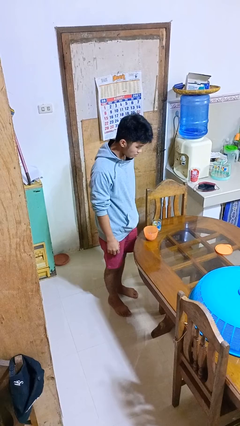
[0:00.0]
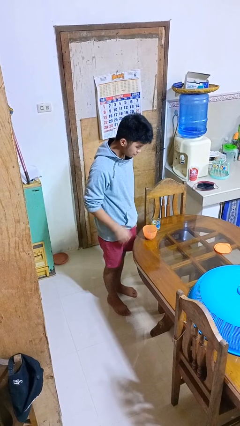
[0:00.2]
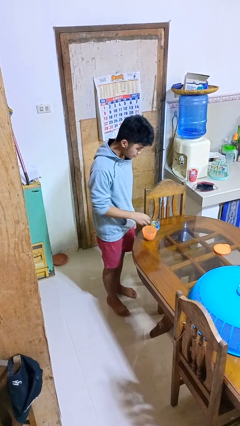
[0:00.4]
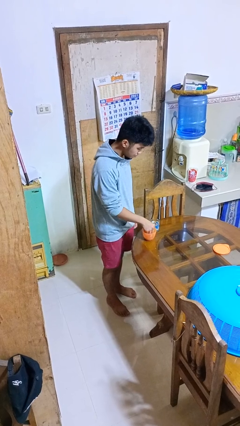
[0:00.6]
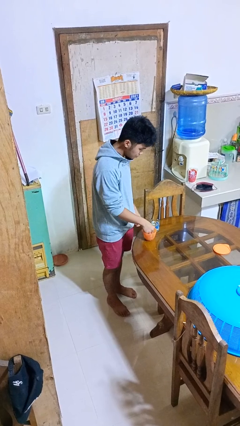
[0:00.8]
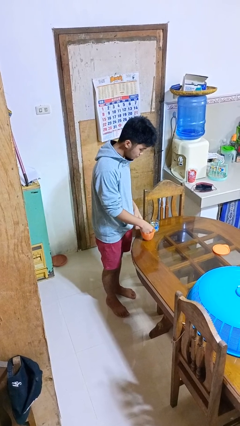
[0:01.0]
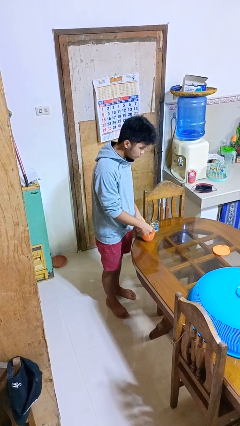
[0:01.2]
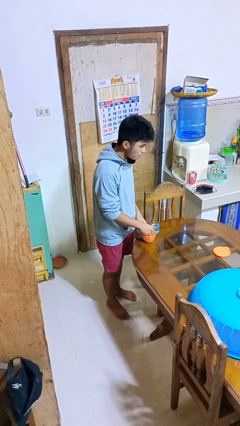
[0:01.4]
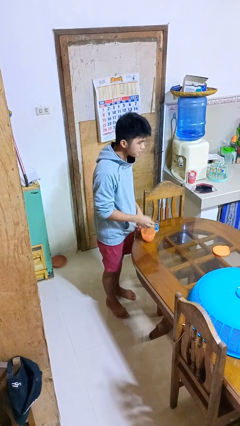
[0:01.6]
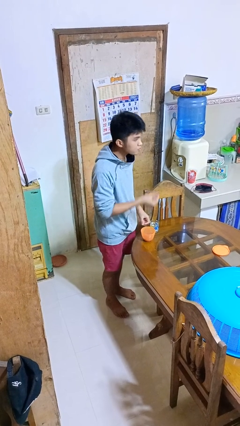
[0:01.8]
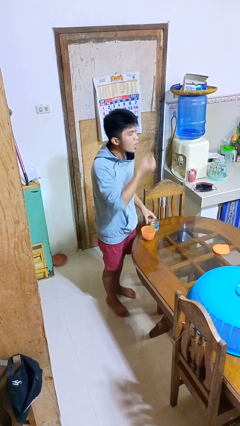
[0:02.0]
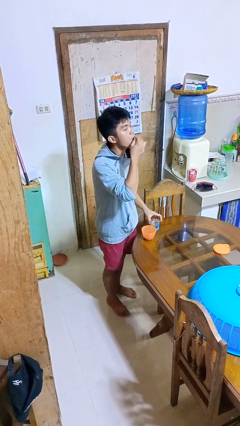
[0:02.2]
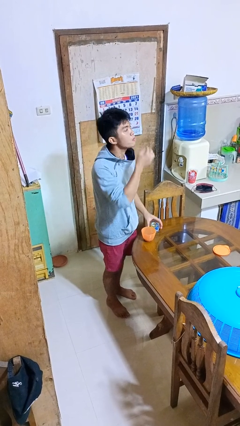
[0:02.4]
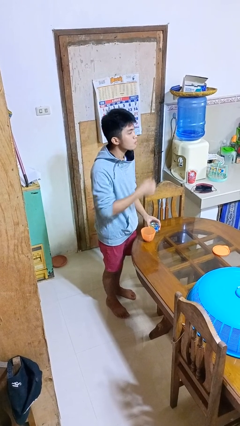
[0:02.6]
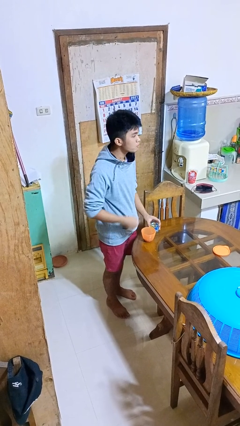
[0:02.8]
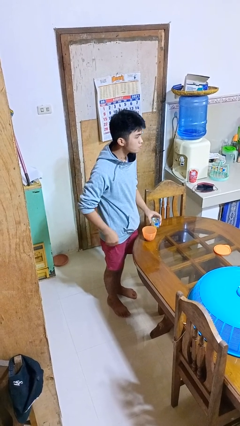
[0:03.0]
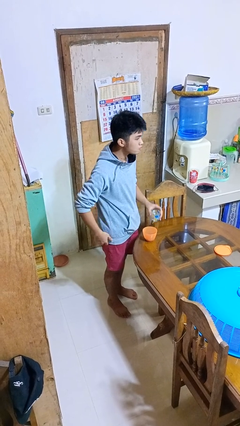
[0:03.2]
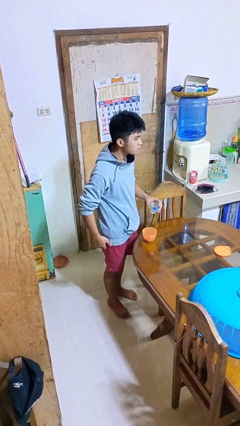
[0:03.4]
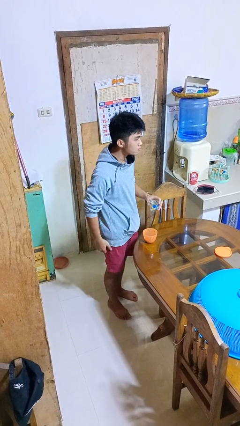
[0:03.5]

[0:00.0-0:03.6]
person takes medicine pills

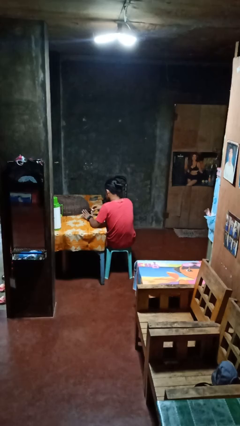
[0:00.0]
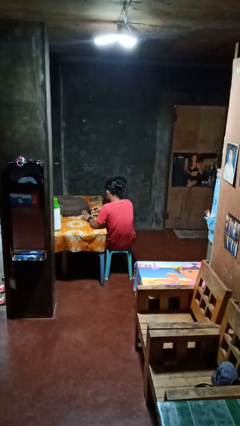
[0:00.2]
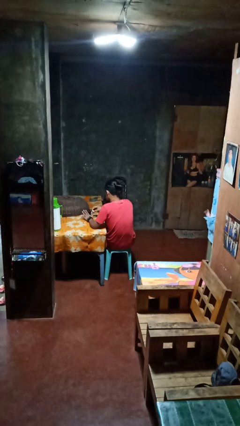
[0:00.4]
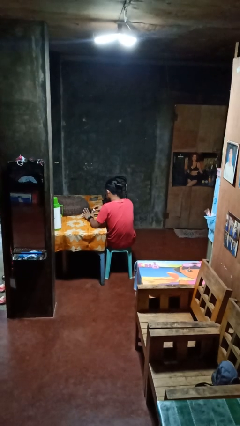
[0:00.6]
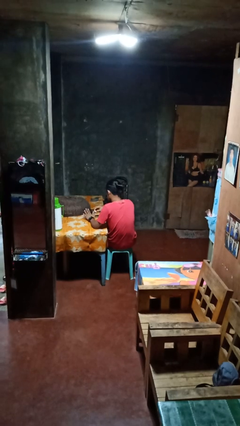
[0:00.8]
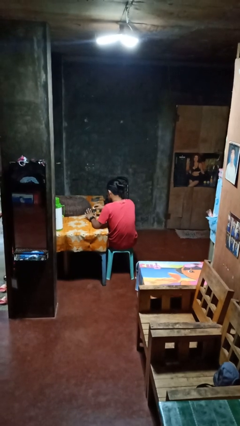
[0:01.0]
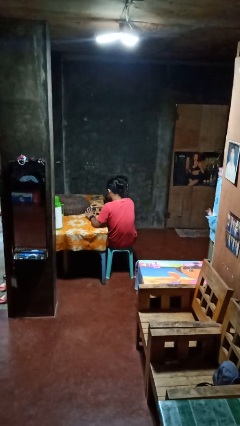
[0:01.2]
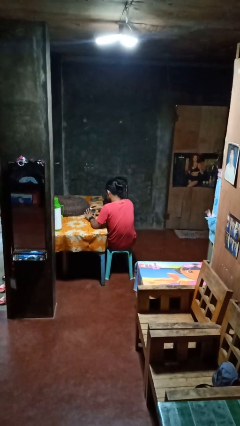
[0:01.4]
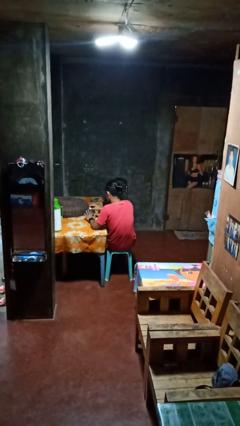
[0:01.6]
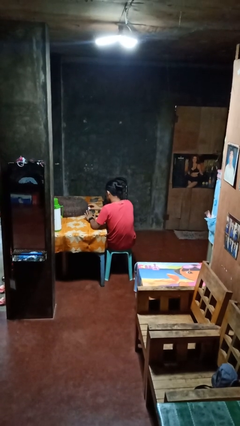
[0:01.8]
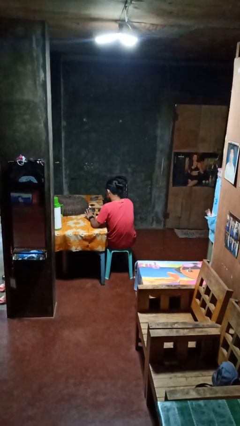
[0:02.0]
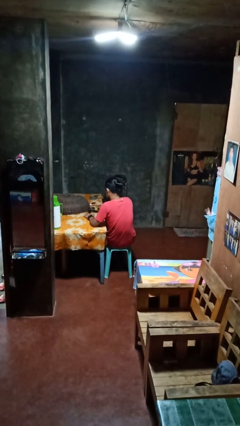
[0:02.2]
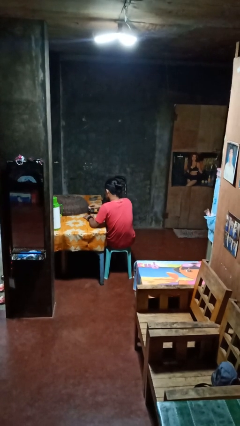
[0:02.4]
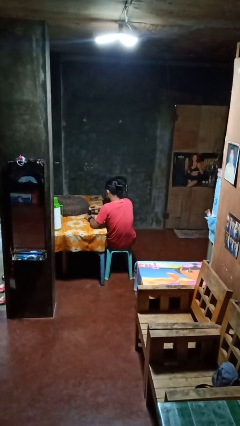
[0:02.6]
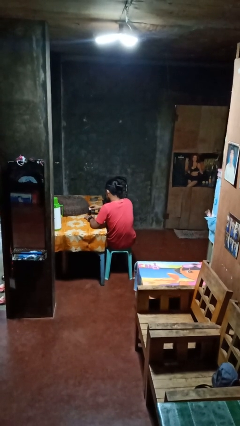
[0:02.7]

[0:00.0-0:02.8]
person paints fingernails

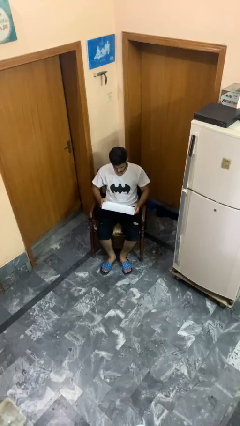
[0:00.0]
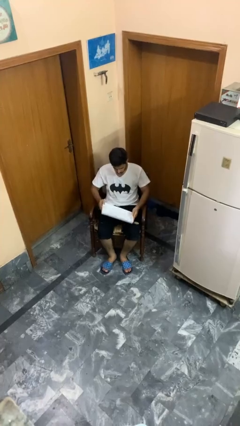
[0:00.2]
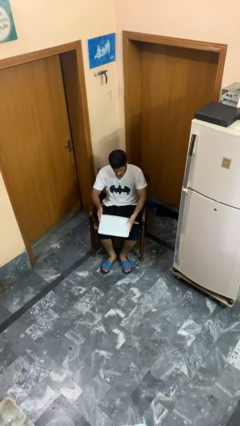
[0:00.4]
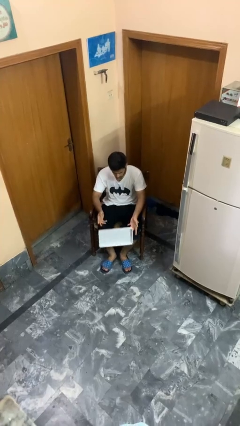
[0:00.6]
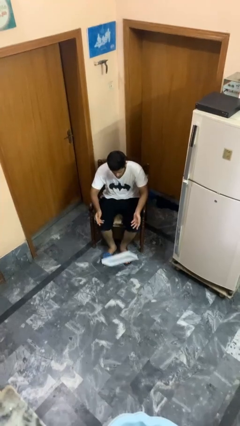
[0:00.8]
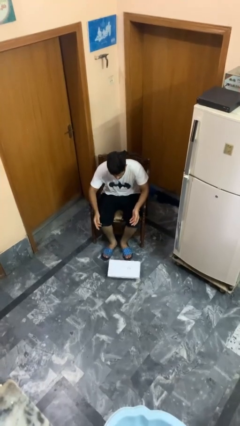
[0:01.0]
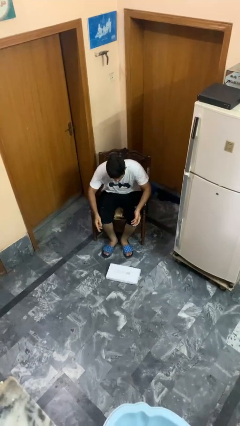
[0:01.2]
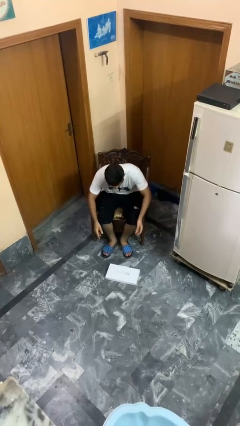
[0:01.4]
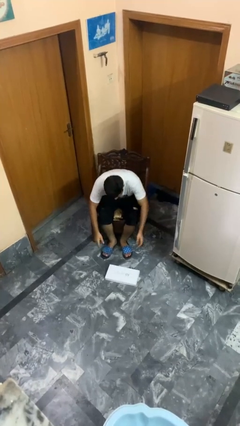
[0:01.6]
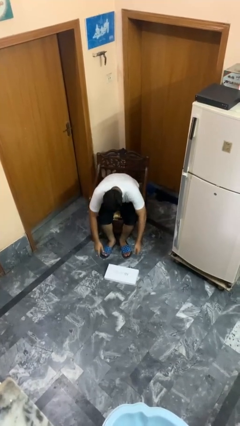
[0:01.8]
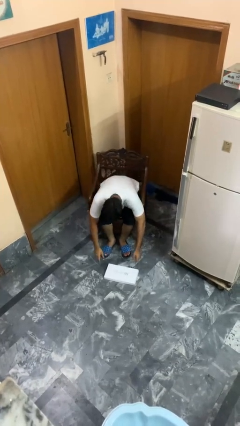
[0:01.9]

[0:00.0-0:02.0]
person drops object

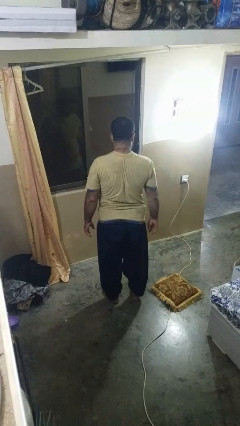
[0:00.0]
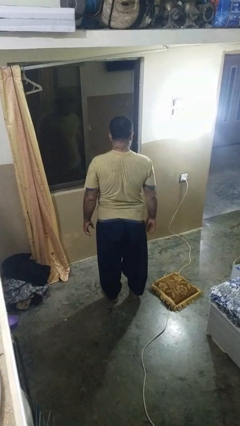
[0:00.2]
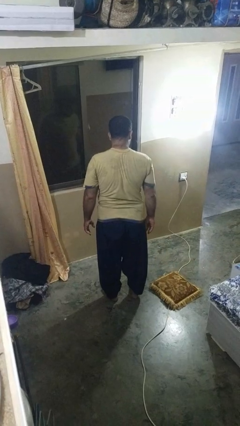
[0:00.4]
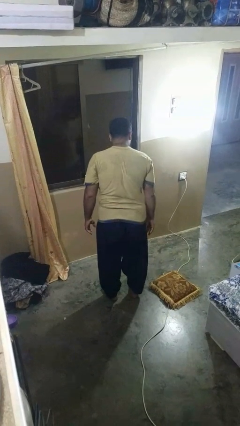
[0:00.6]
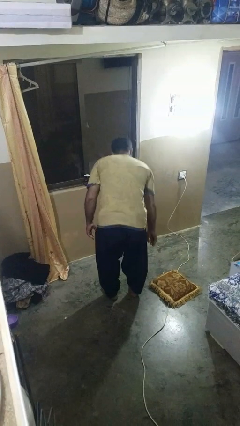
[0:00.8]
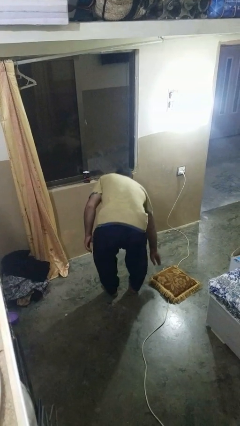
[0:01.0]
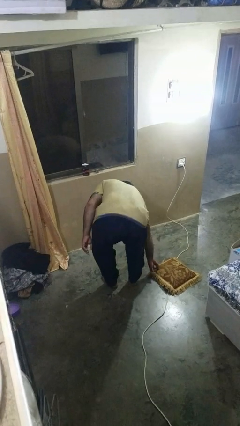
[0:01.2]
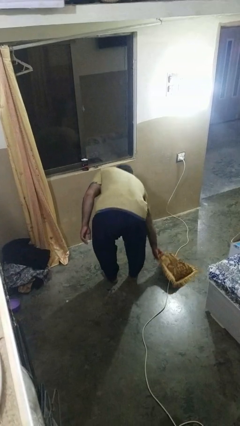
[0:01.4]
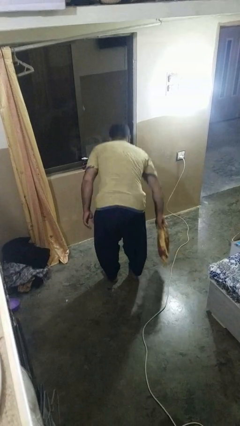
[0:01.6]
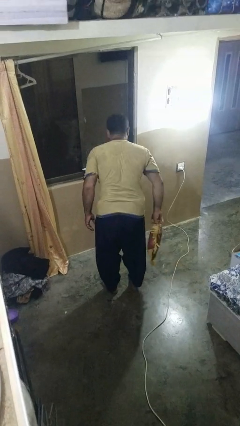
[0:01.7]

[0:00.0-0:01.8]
person picks up object from floor

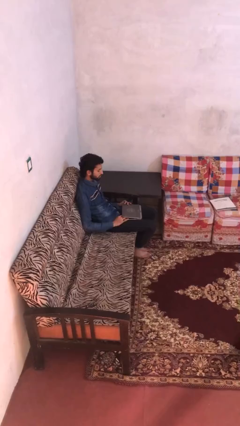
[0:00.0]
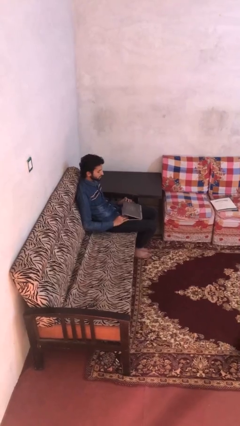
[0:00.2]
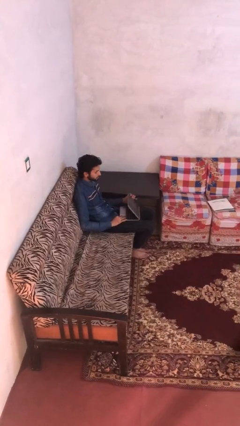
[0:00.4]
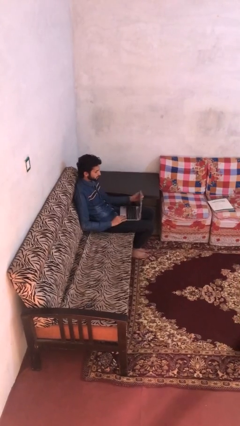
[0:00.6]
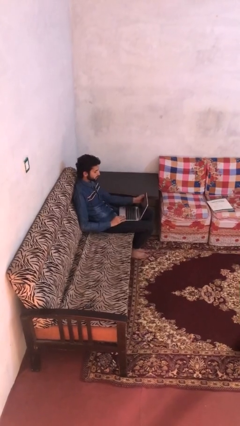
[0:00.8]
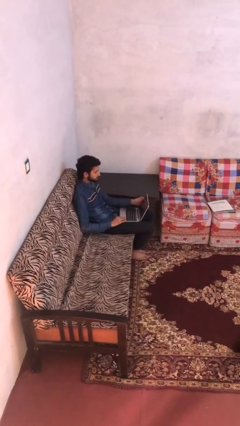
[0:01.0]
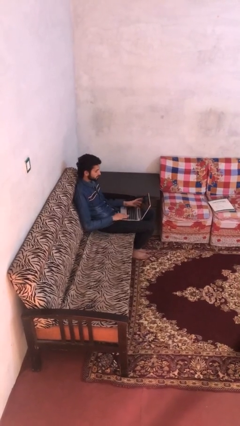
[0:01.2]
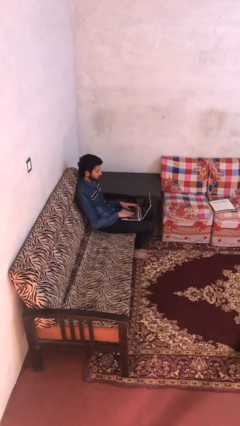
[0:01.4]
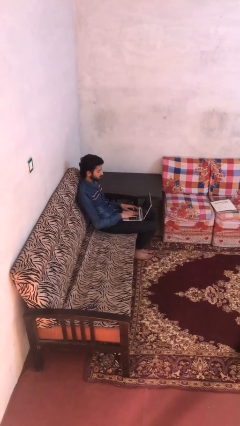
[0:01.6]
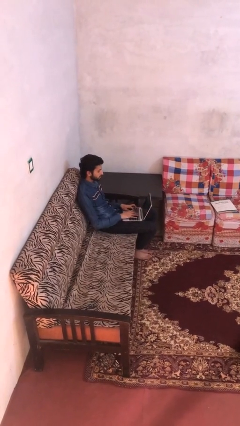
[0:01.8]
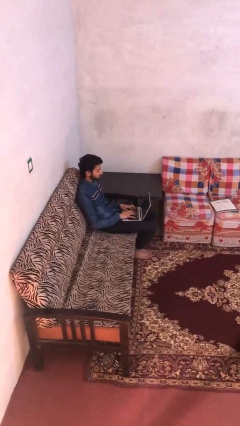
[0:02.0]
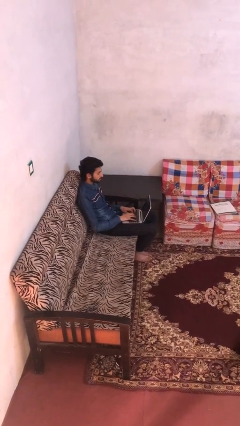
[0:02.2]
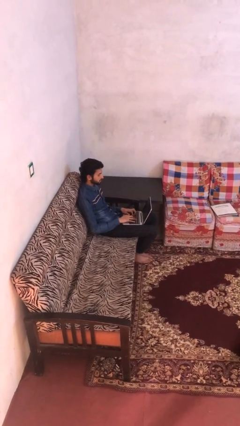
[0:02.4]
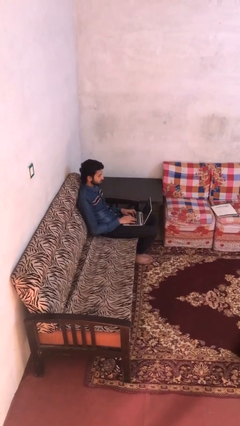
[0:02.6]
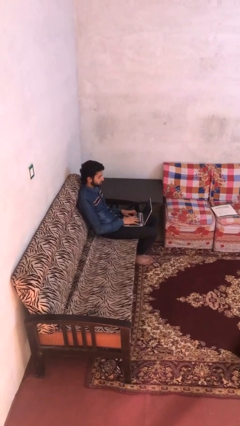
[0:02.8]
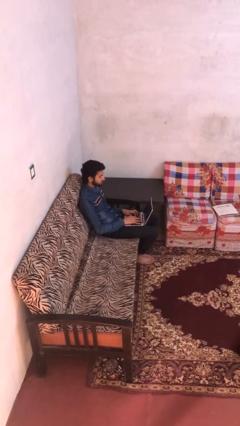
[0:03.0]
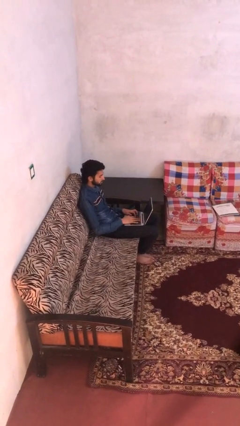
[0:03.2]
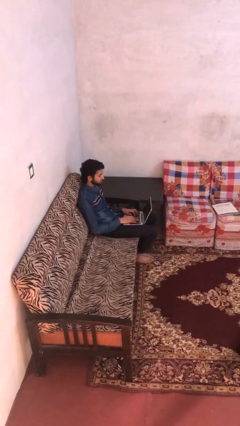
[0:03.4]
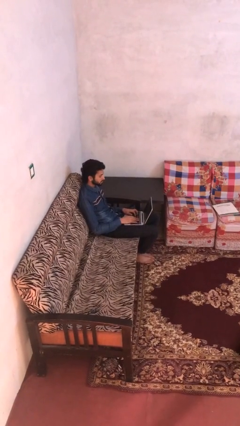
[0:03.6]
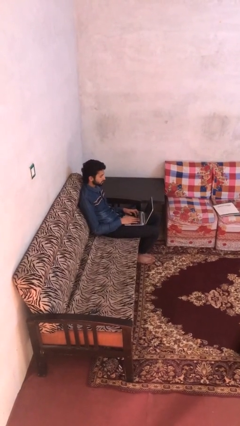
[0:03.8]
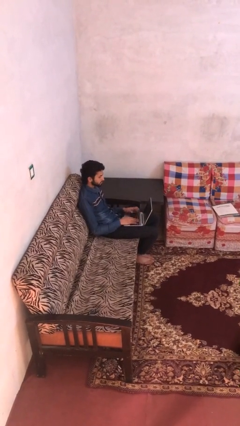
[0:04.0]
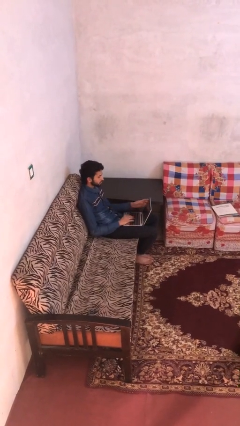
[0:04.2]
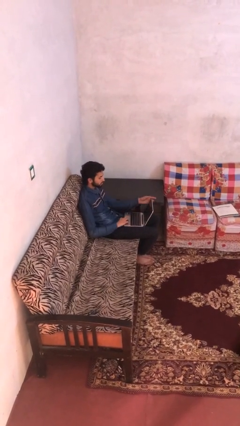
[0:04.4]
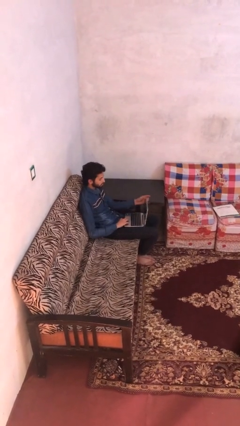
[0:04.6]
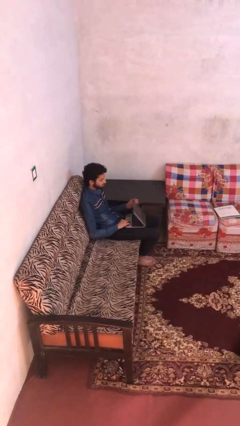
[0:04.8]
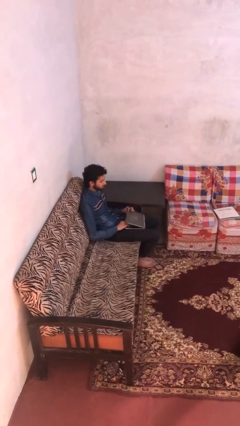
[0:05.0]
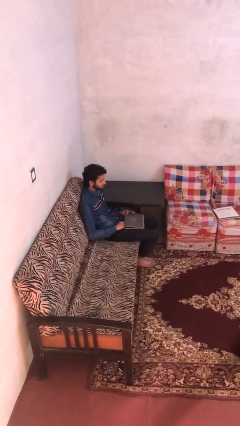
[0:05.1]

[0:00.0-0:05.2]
person interacts with laptop

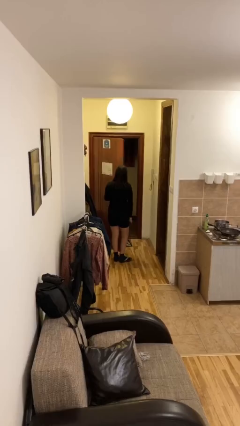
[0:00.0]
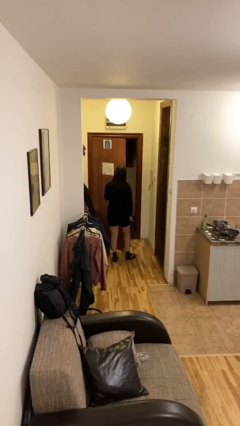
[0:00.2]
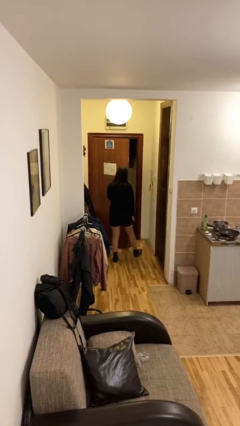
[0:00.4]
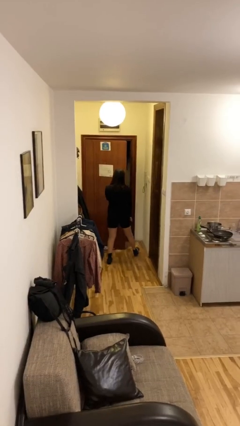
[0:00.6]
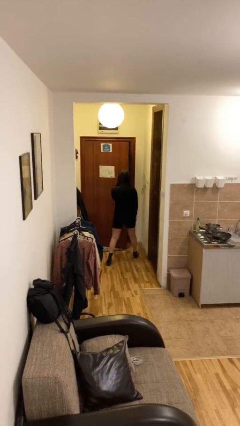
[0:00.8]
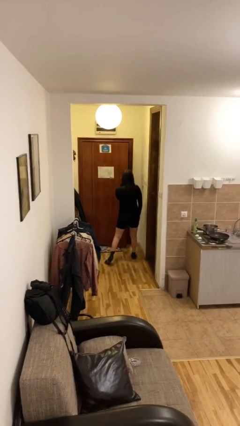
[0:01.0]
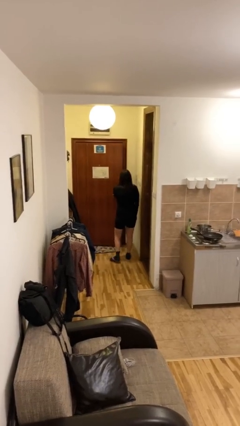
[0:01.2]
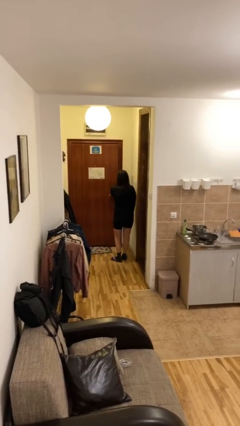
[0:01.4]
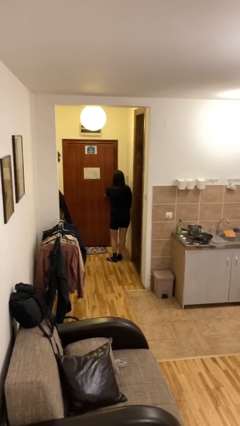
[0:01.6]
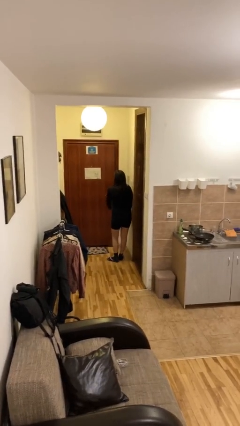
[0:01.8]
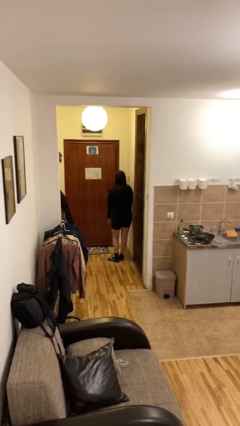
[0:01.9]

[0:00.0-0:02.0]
person closes facility door
